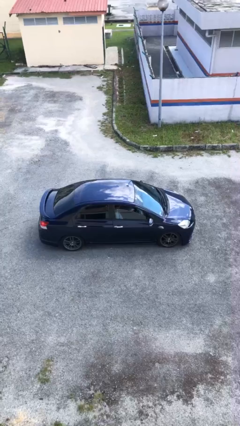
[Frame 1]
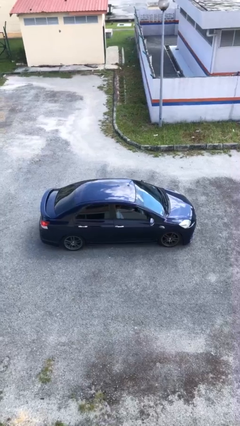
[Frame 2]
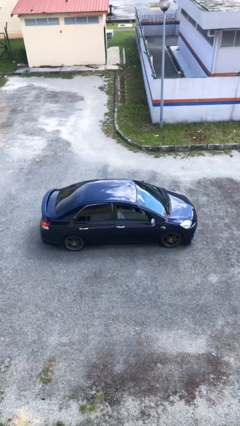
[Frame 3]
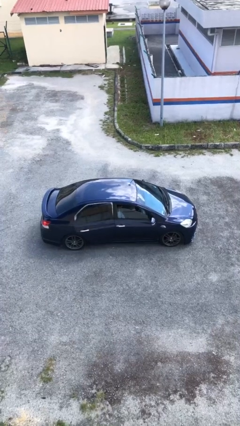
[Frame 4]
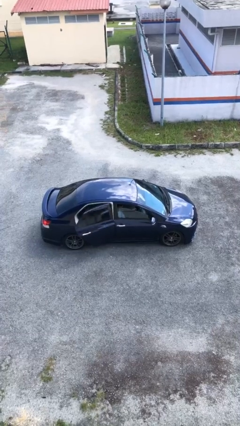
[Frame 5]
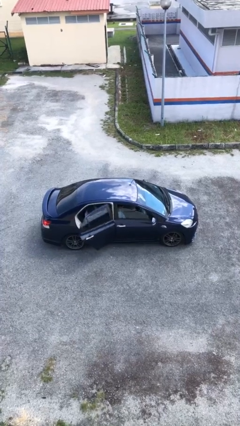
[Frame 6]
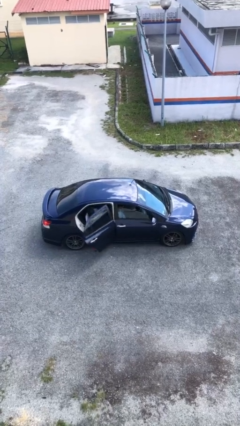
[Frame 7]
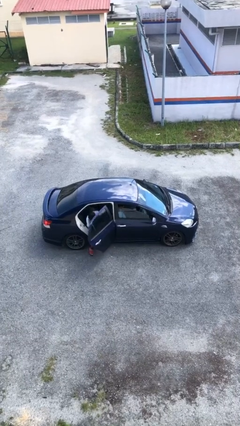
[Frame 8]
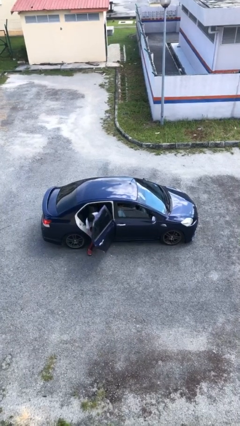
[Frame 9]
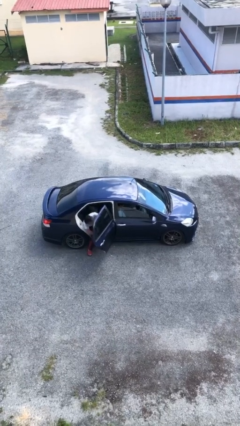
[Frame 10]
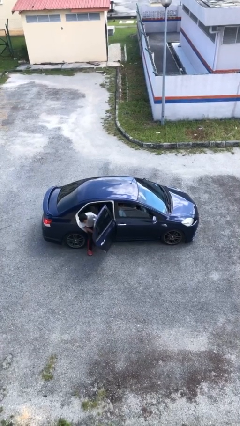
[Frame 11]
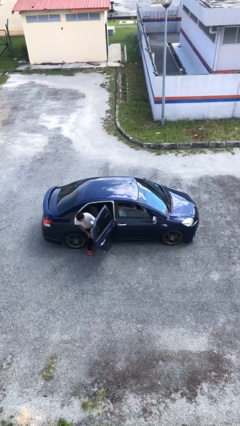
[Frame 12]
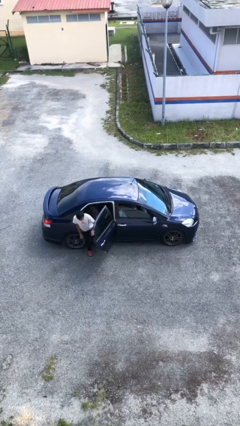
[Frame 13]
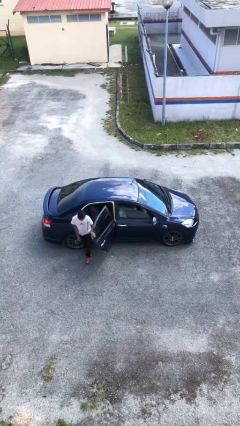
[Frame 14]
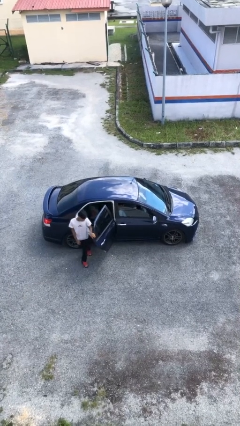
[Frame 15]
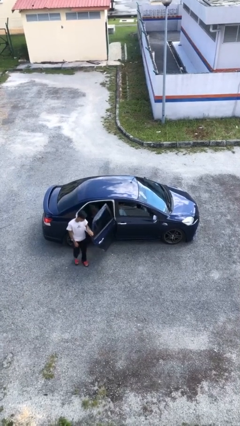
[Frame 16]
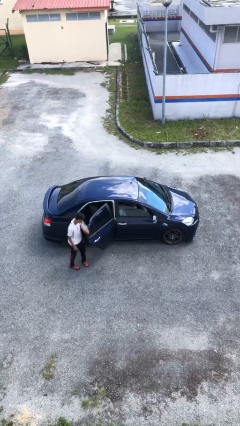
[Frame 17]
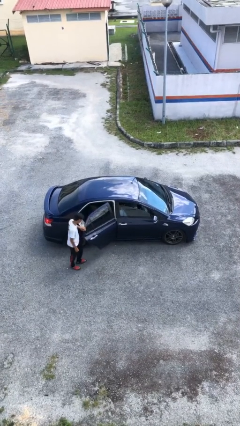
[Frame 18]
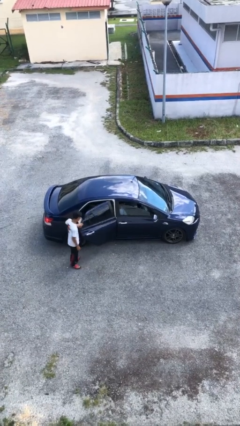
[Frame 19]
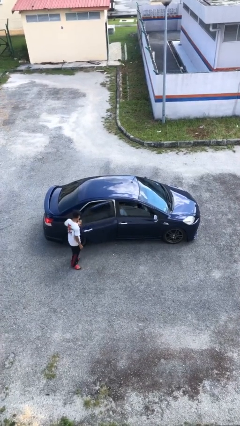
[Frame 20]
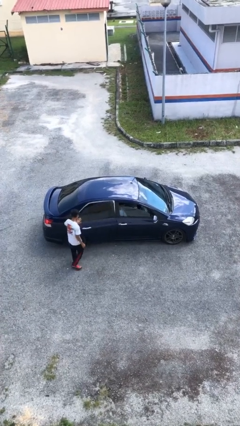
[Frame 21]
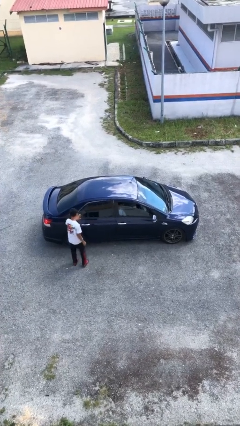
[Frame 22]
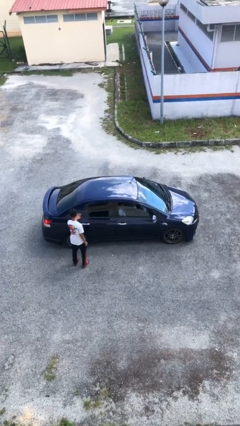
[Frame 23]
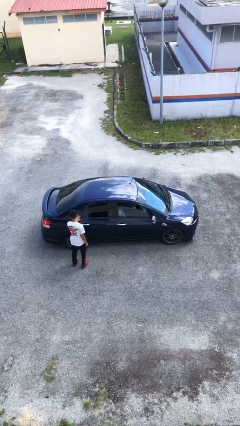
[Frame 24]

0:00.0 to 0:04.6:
car drops off person

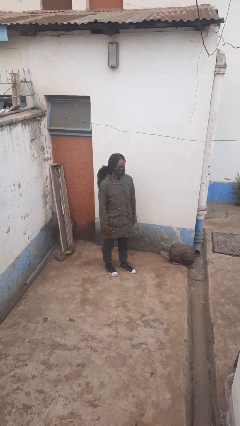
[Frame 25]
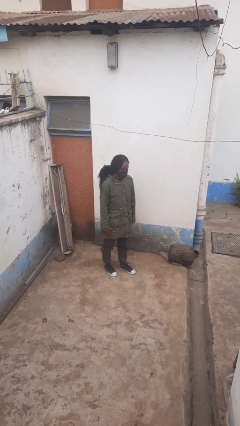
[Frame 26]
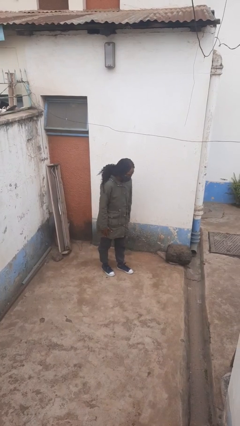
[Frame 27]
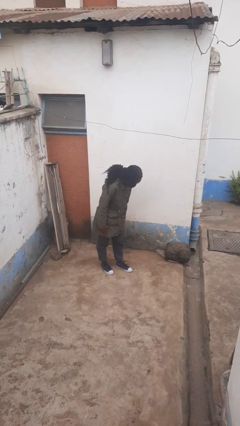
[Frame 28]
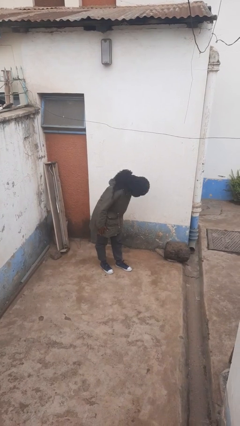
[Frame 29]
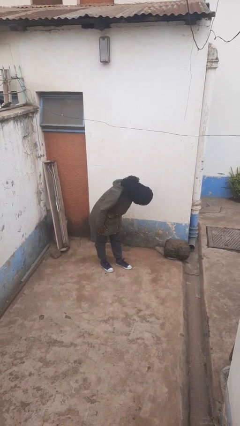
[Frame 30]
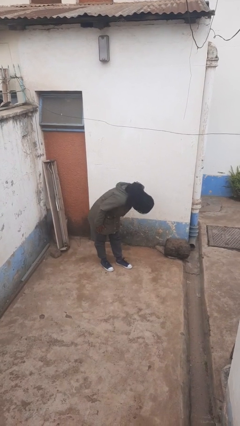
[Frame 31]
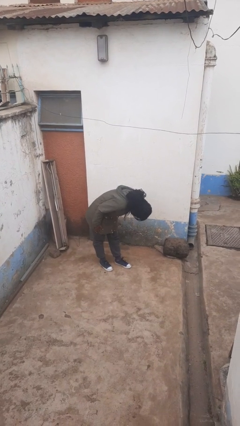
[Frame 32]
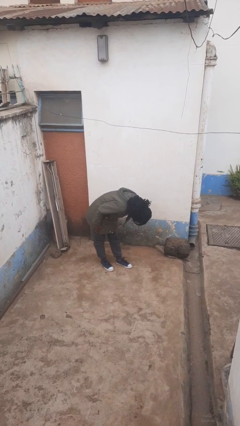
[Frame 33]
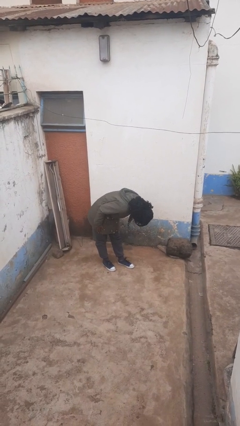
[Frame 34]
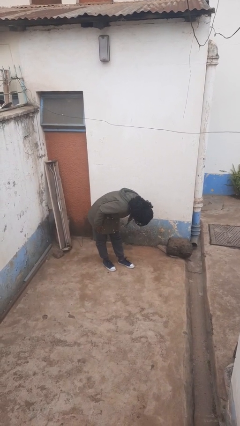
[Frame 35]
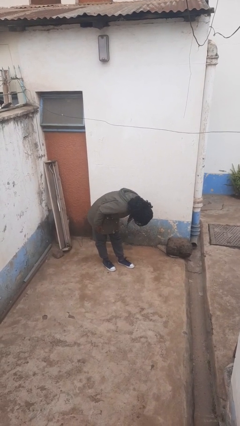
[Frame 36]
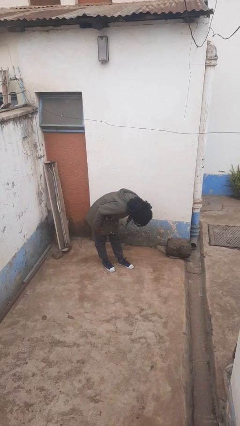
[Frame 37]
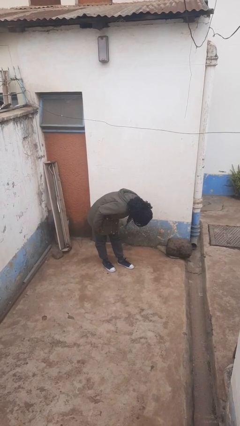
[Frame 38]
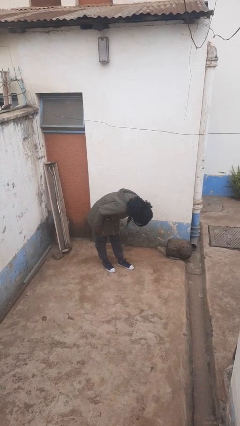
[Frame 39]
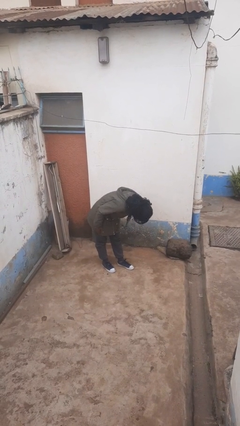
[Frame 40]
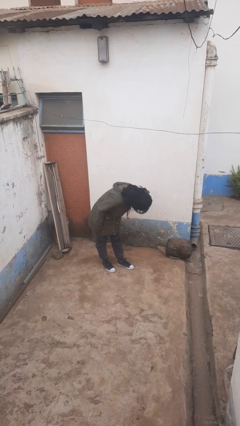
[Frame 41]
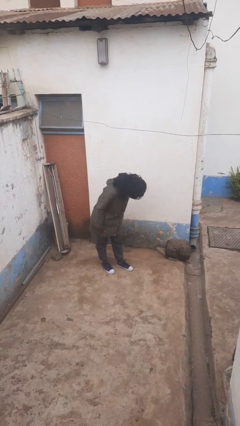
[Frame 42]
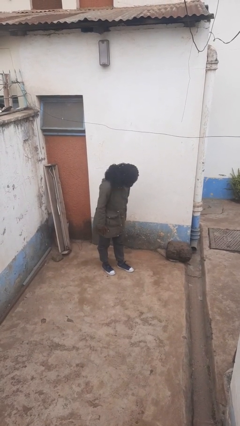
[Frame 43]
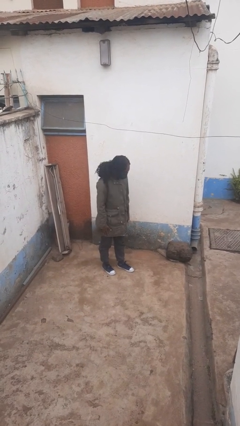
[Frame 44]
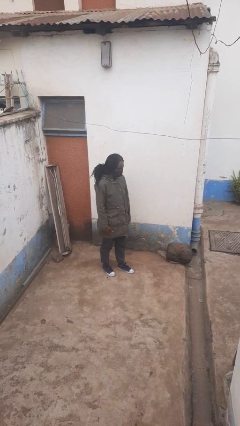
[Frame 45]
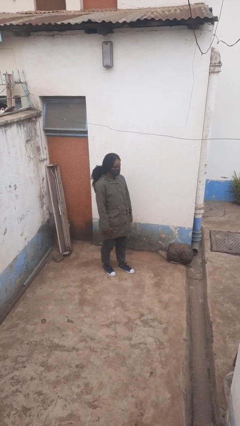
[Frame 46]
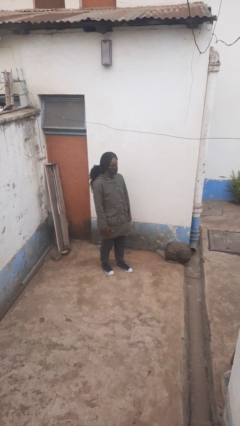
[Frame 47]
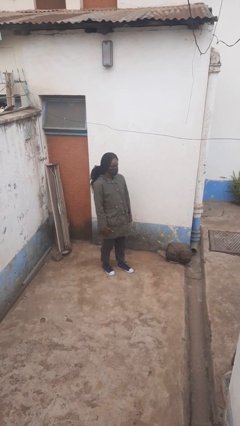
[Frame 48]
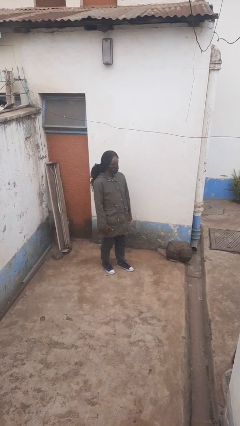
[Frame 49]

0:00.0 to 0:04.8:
person bows

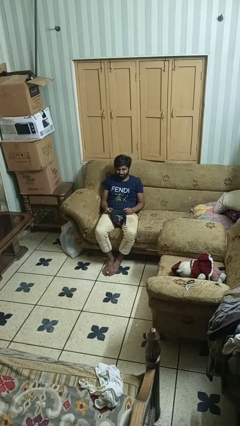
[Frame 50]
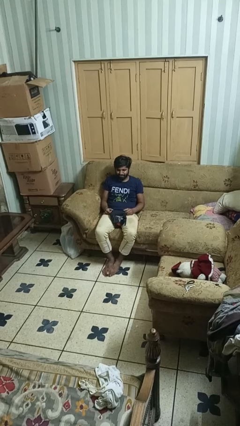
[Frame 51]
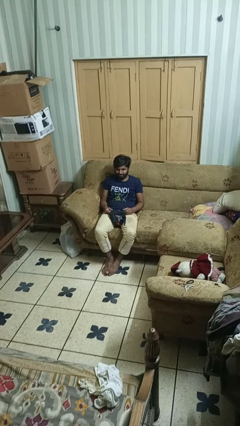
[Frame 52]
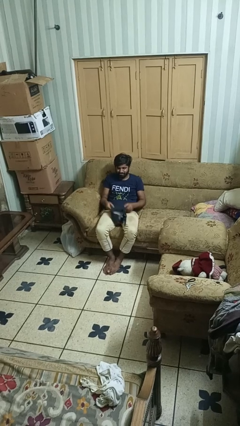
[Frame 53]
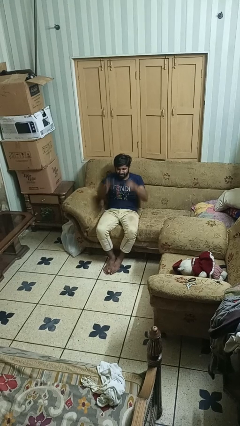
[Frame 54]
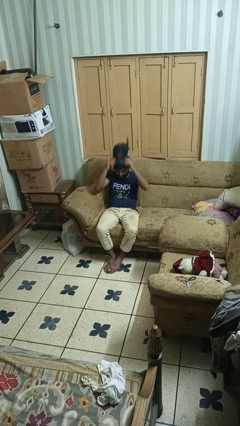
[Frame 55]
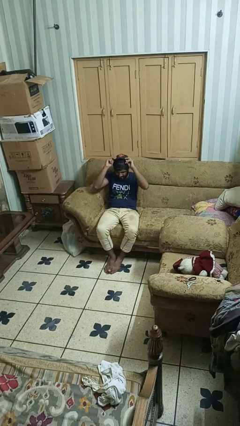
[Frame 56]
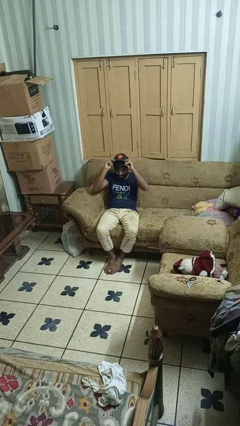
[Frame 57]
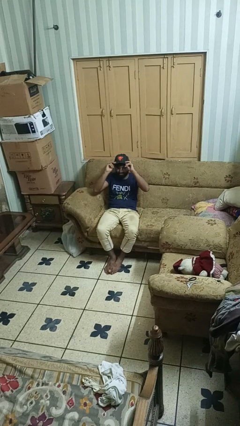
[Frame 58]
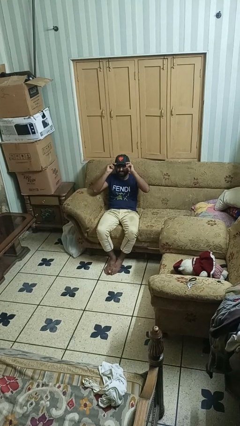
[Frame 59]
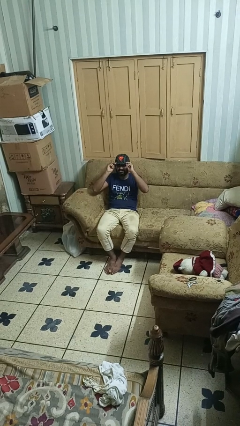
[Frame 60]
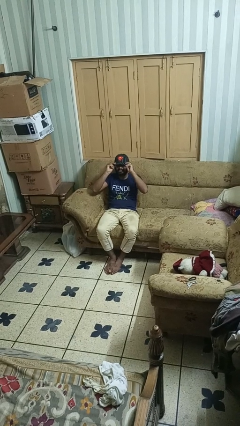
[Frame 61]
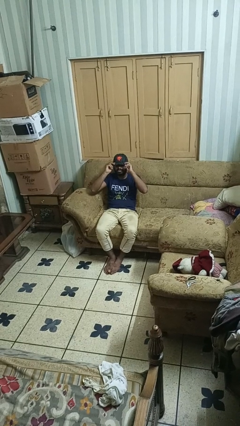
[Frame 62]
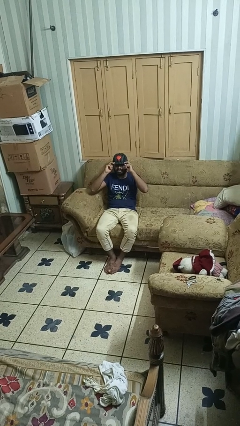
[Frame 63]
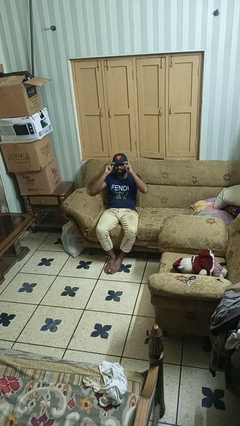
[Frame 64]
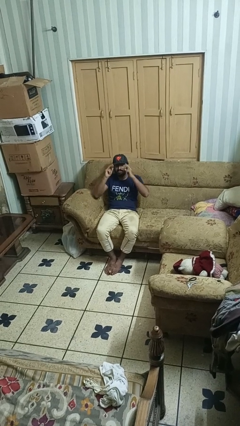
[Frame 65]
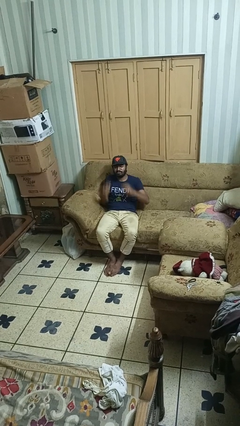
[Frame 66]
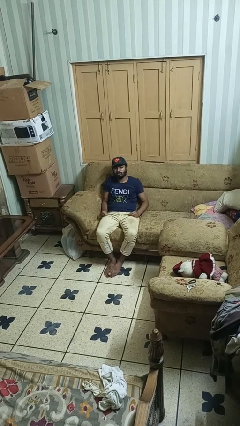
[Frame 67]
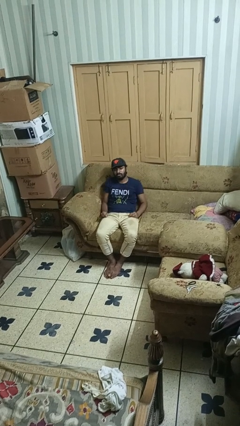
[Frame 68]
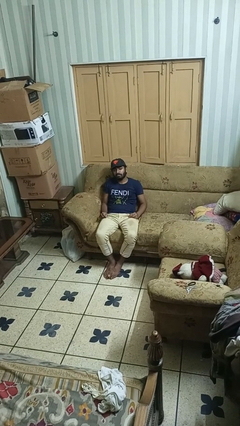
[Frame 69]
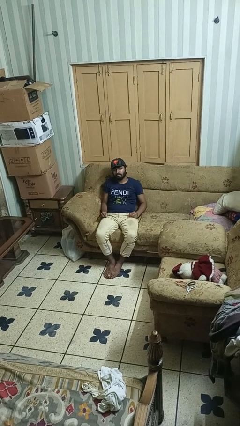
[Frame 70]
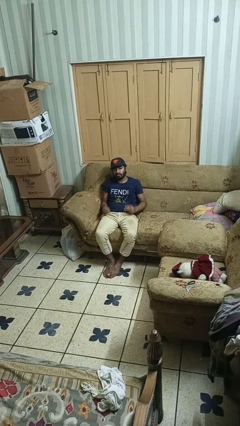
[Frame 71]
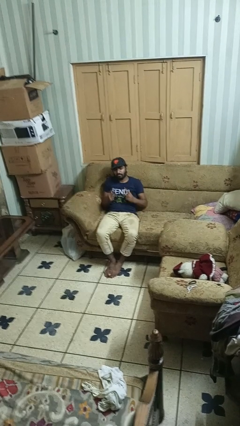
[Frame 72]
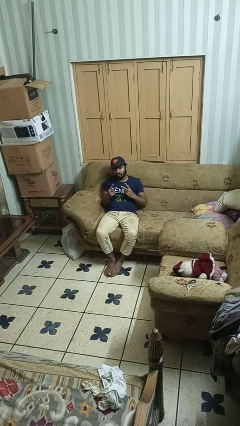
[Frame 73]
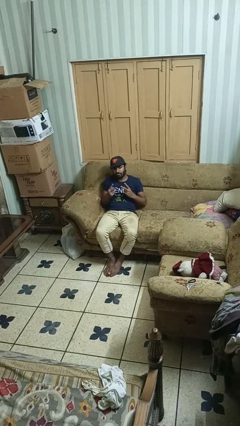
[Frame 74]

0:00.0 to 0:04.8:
person puts on hat

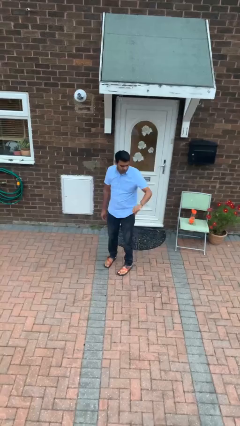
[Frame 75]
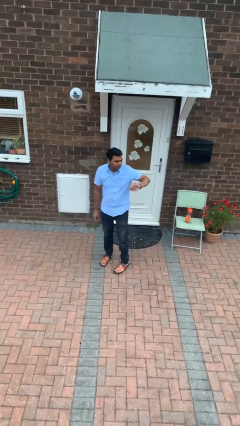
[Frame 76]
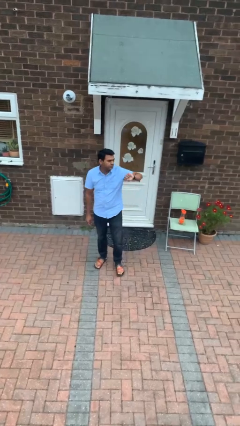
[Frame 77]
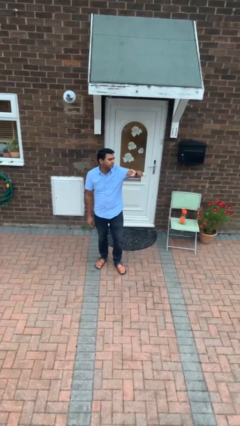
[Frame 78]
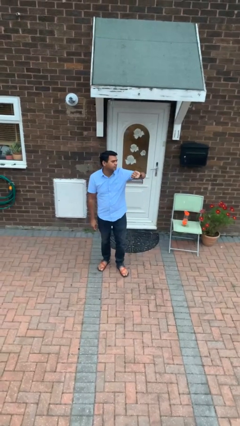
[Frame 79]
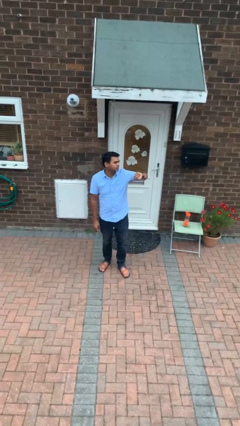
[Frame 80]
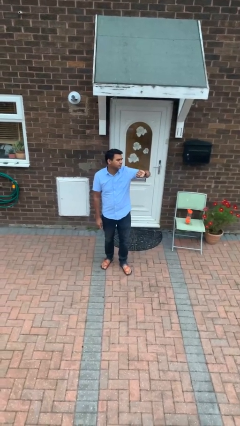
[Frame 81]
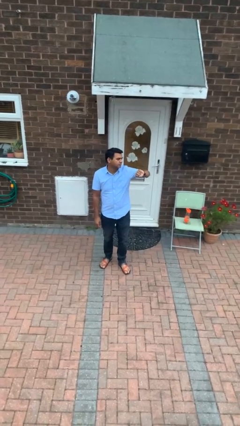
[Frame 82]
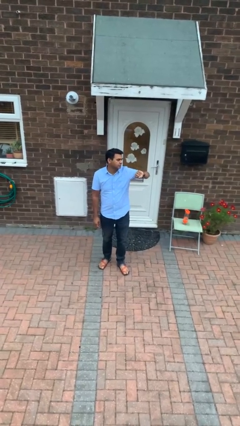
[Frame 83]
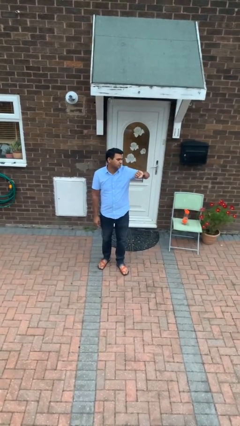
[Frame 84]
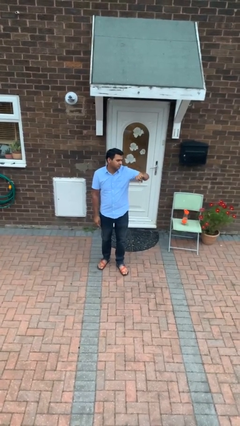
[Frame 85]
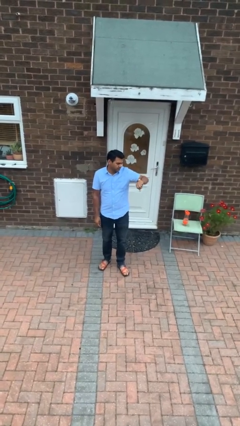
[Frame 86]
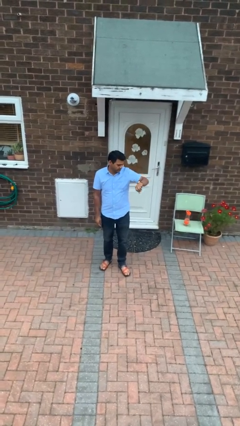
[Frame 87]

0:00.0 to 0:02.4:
person looks at wristwatch

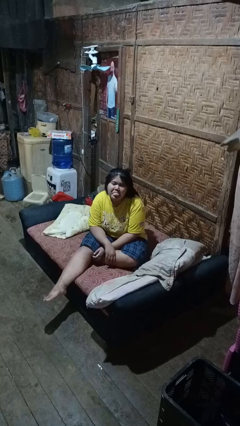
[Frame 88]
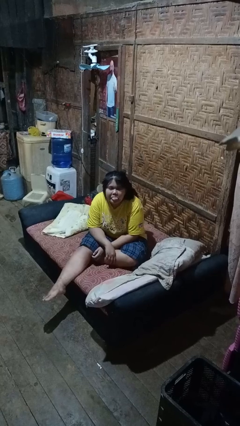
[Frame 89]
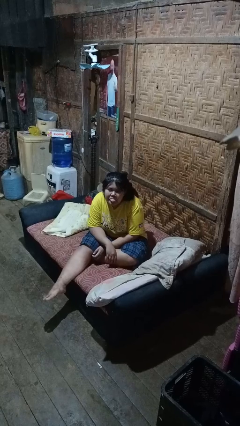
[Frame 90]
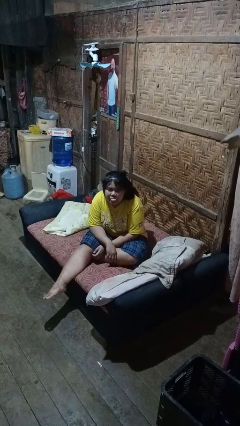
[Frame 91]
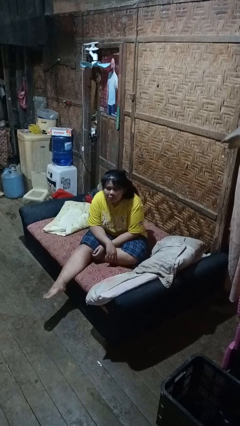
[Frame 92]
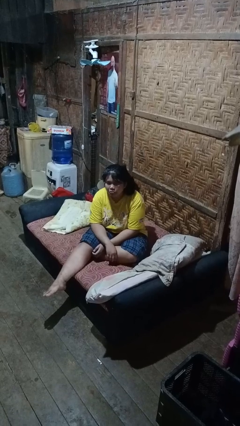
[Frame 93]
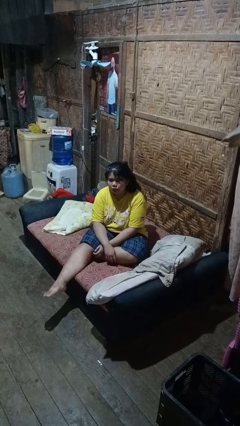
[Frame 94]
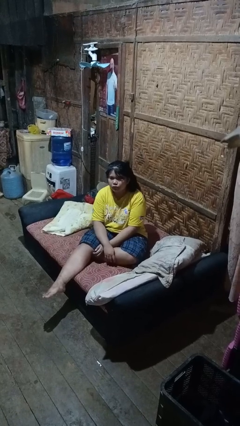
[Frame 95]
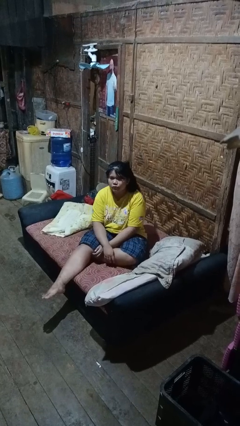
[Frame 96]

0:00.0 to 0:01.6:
person sticks out tongue
